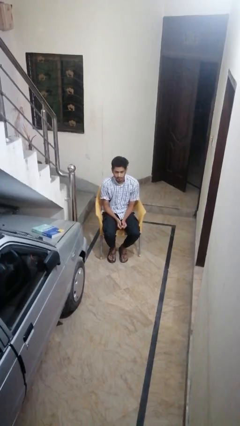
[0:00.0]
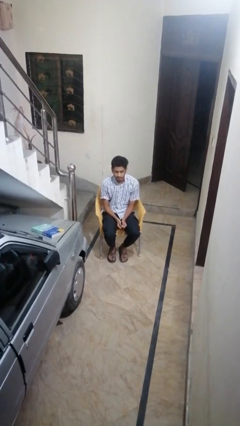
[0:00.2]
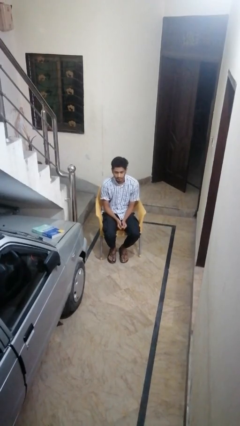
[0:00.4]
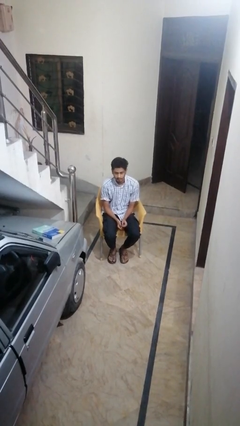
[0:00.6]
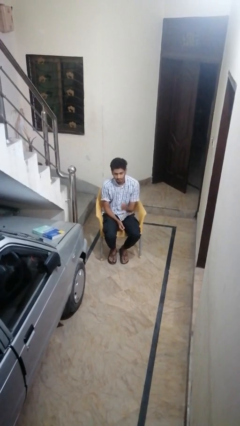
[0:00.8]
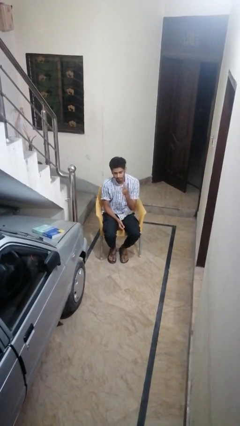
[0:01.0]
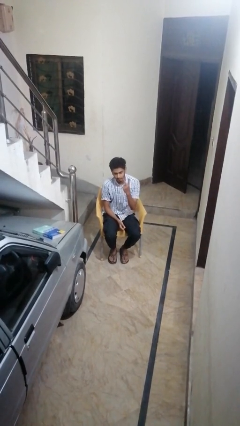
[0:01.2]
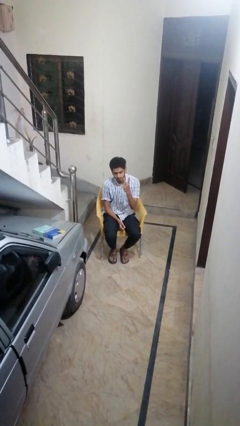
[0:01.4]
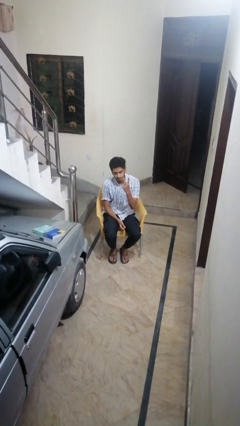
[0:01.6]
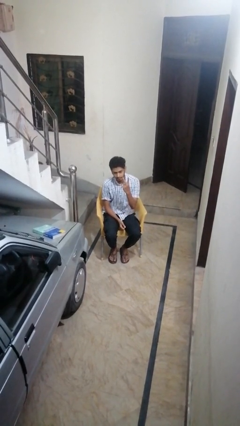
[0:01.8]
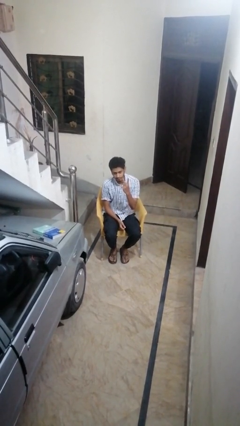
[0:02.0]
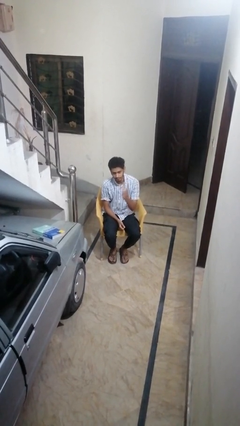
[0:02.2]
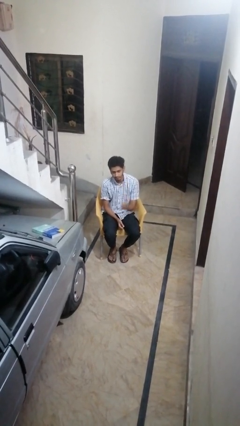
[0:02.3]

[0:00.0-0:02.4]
person gestures peace

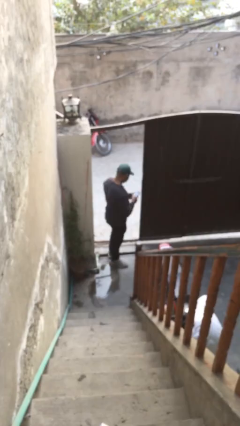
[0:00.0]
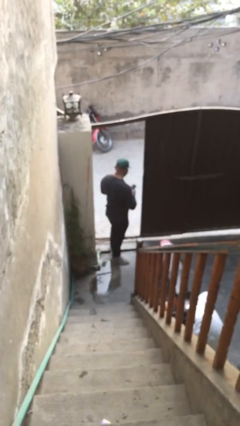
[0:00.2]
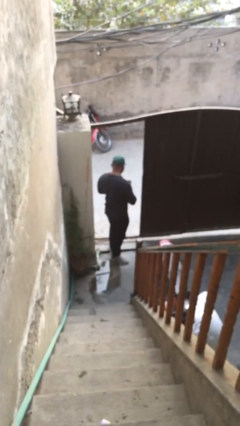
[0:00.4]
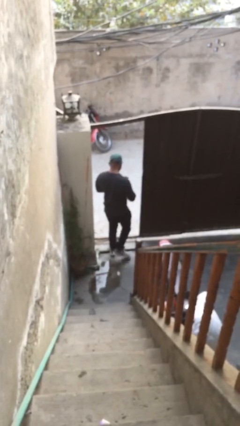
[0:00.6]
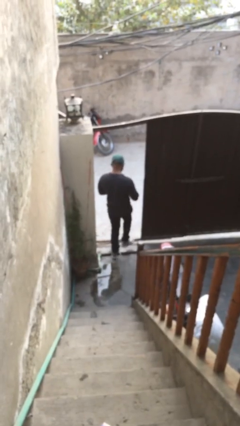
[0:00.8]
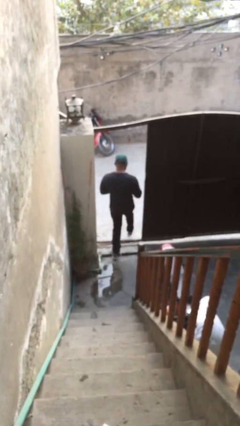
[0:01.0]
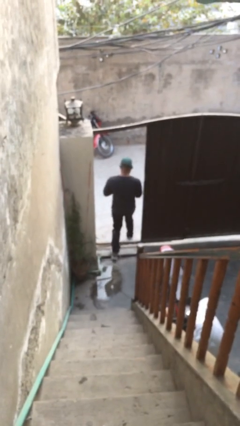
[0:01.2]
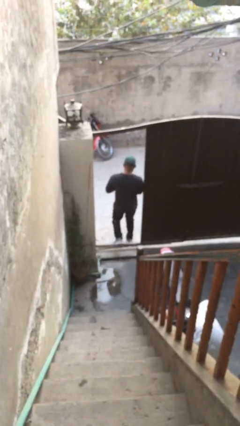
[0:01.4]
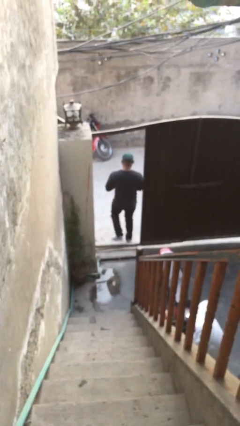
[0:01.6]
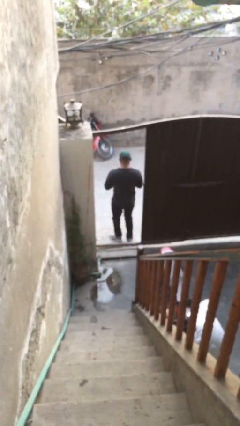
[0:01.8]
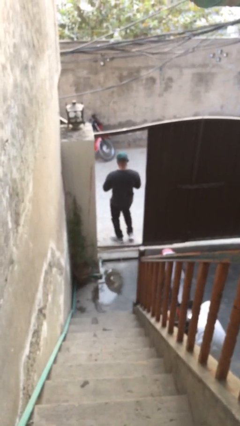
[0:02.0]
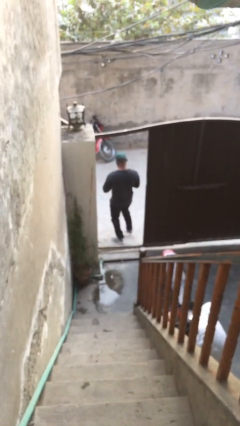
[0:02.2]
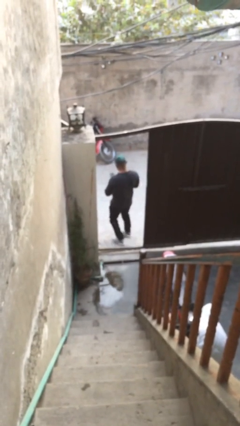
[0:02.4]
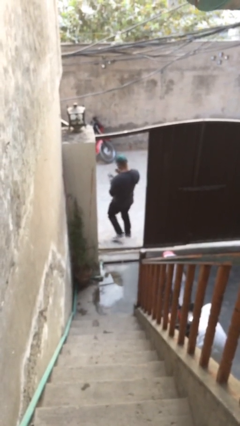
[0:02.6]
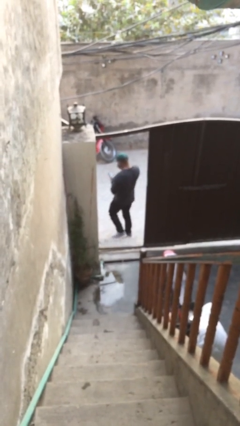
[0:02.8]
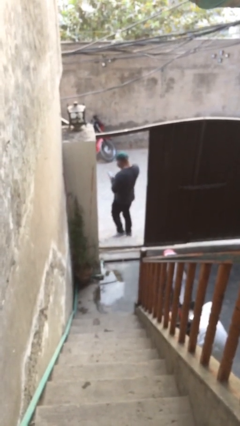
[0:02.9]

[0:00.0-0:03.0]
person exits scene through structure

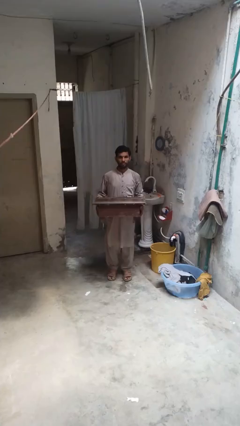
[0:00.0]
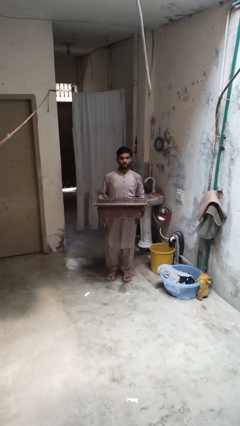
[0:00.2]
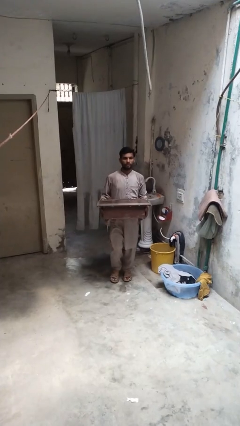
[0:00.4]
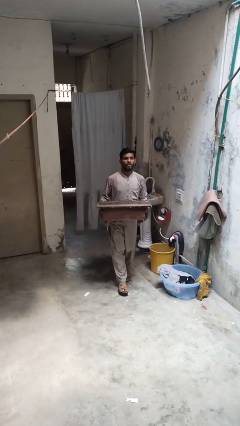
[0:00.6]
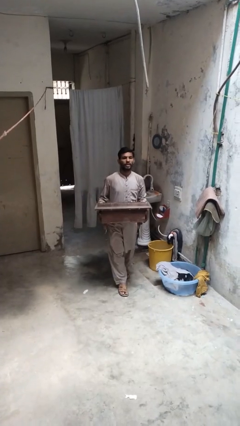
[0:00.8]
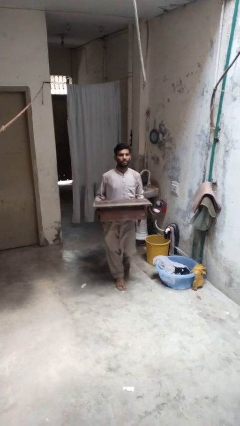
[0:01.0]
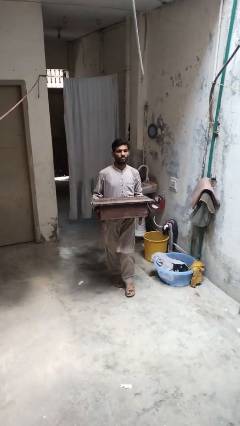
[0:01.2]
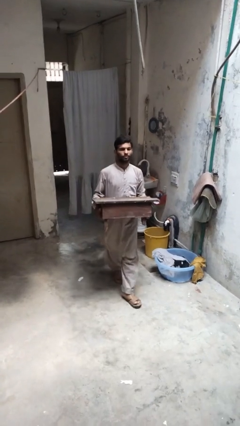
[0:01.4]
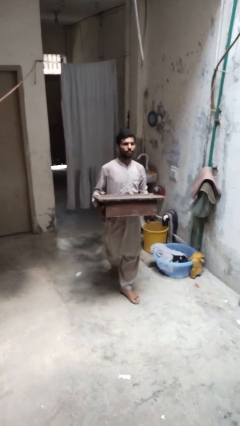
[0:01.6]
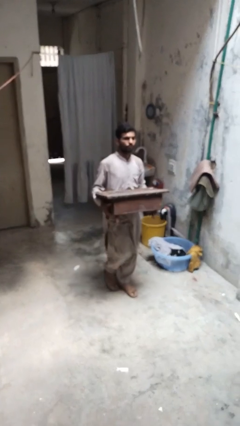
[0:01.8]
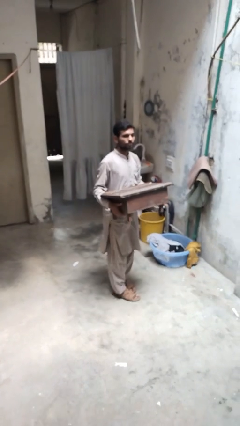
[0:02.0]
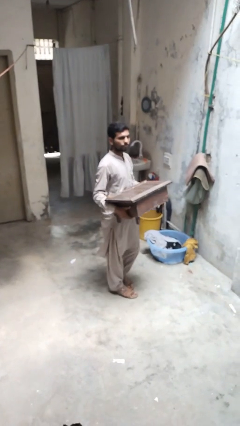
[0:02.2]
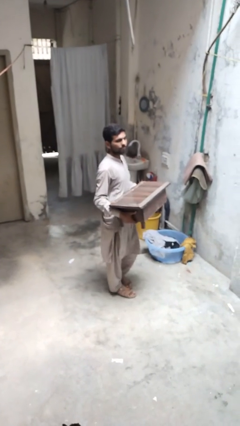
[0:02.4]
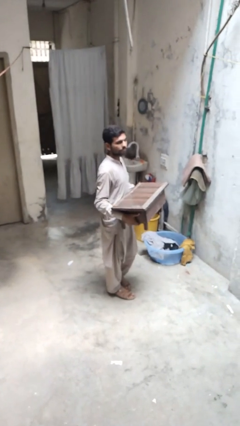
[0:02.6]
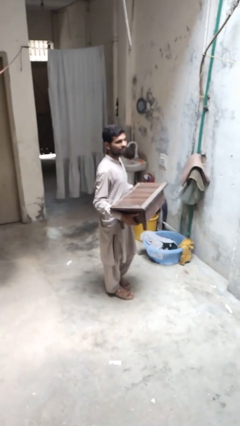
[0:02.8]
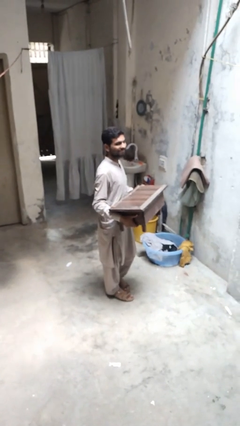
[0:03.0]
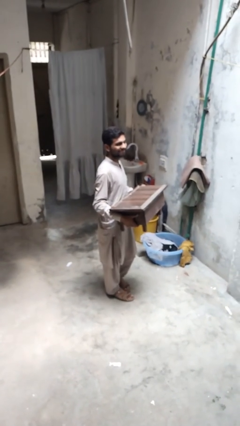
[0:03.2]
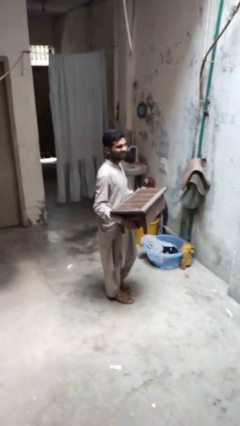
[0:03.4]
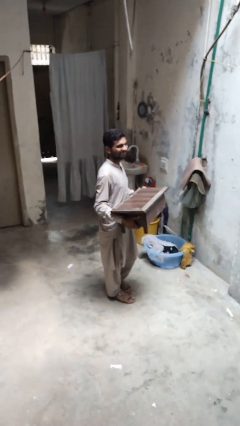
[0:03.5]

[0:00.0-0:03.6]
person carries furniture

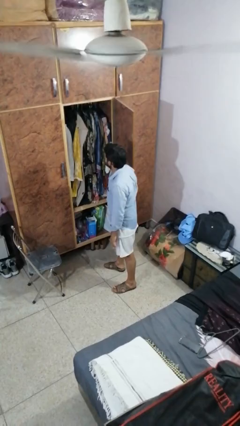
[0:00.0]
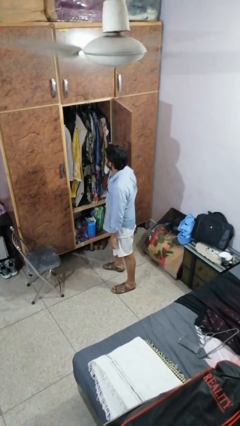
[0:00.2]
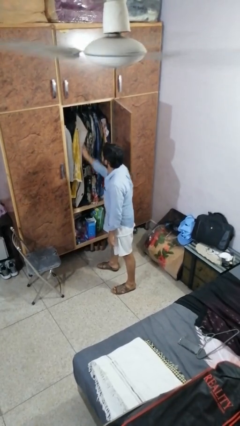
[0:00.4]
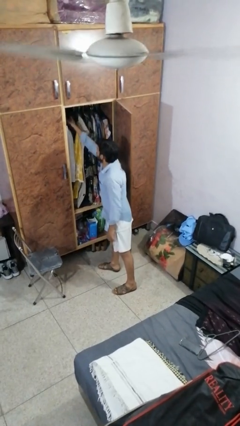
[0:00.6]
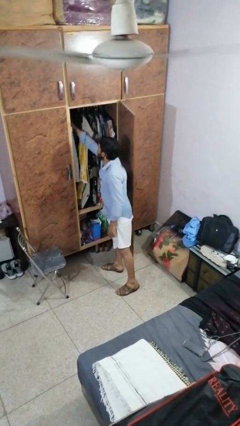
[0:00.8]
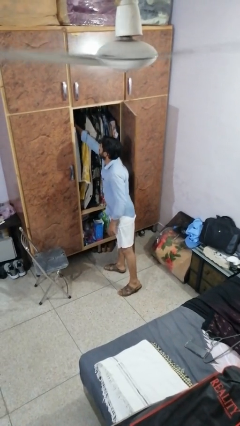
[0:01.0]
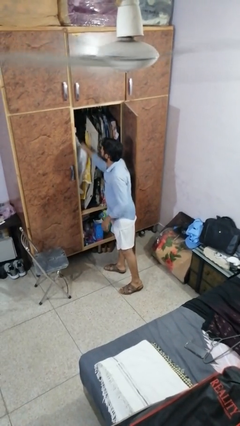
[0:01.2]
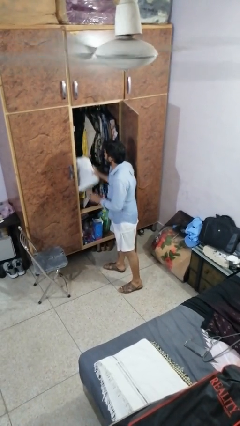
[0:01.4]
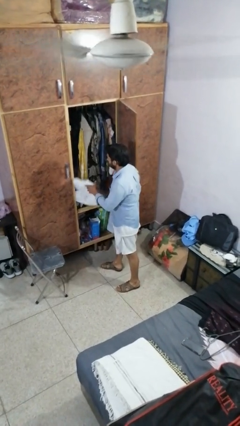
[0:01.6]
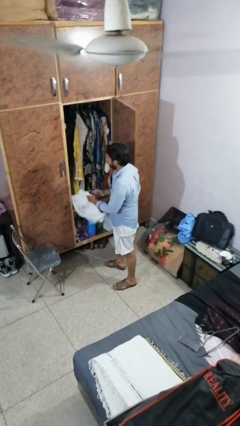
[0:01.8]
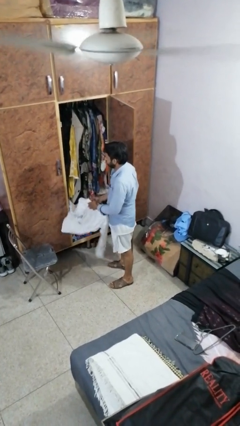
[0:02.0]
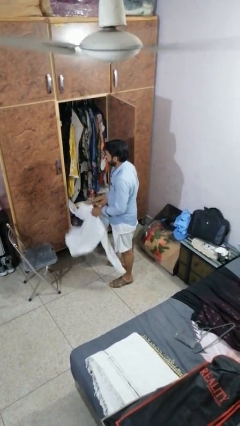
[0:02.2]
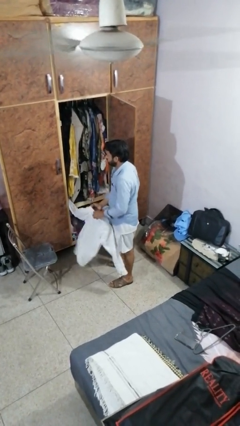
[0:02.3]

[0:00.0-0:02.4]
person takes clothes from closet

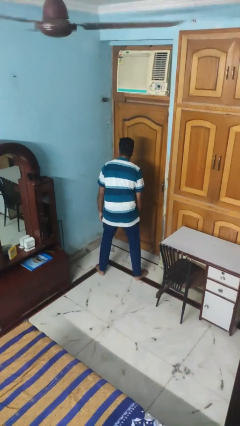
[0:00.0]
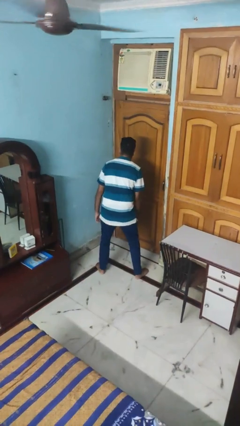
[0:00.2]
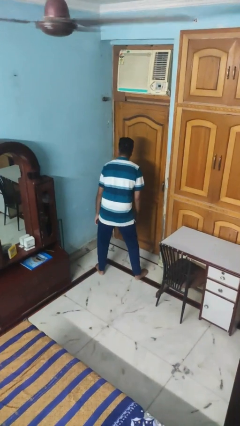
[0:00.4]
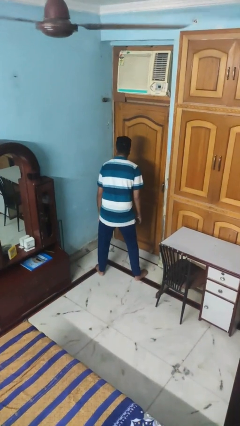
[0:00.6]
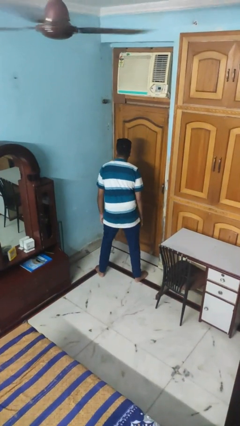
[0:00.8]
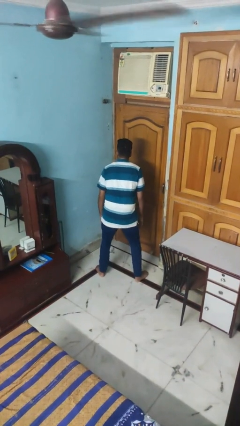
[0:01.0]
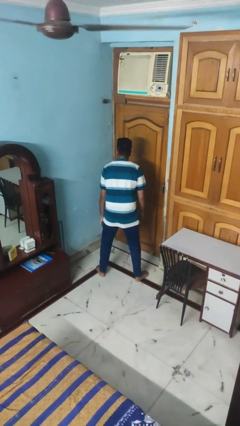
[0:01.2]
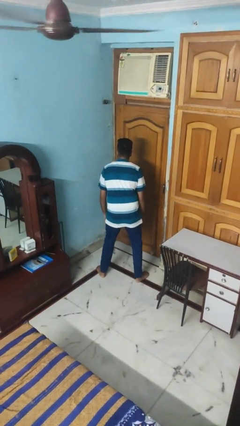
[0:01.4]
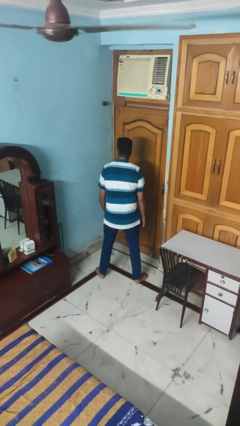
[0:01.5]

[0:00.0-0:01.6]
person wiggles hips

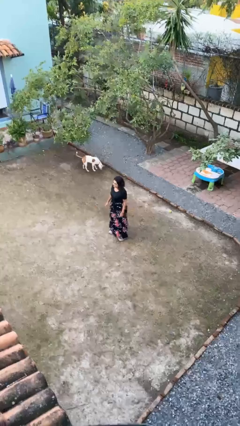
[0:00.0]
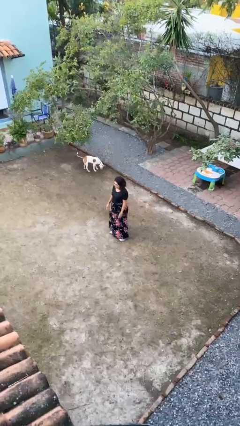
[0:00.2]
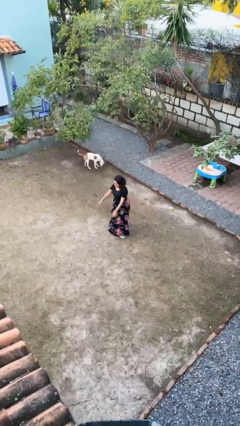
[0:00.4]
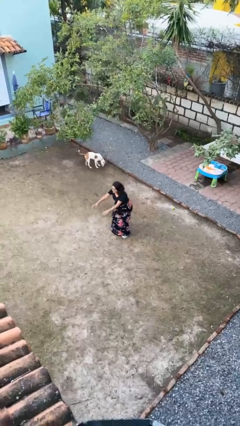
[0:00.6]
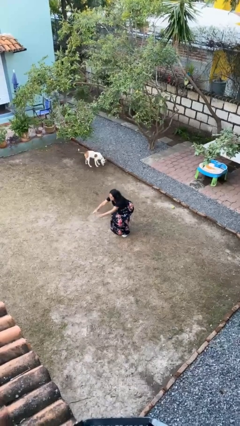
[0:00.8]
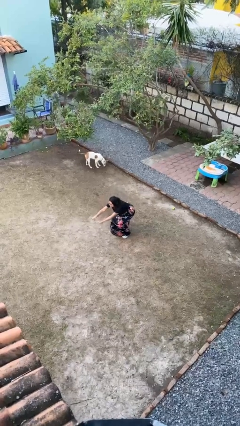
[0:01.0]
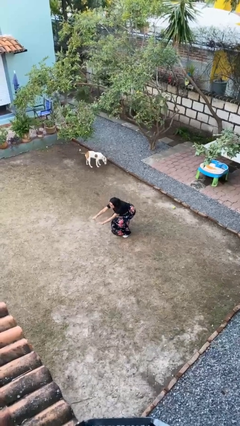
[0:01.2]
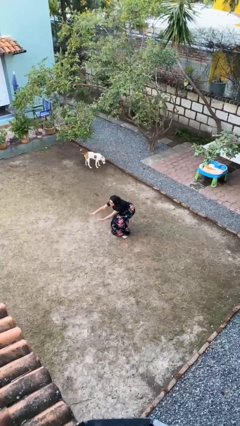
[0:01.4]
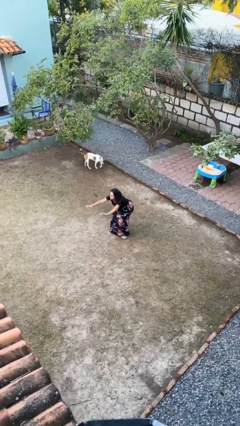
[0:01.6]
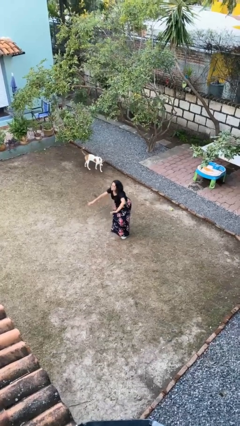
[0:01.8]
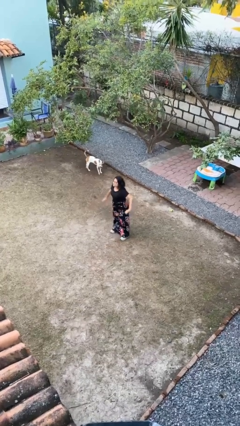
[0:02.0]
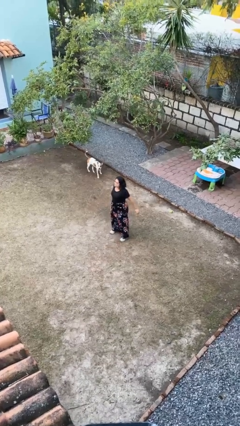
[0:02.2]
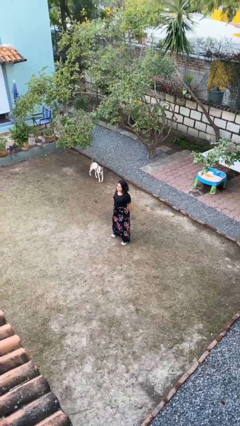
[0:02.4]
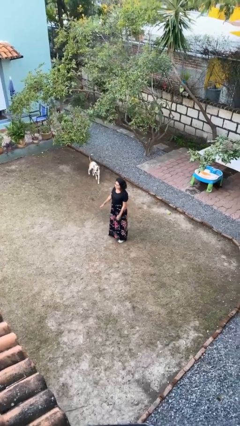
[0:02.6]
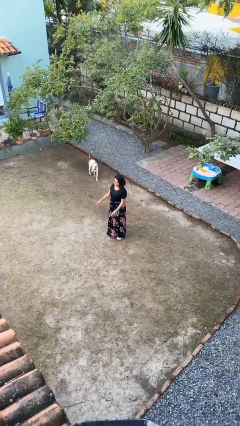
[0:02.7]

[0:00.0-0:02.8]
person exercises with situp

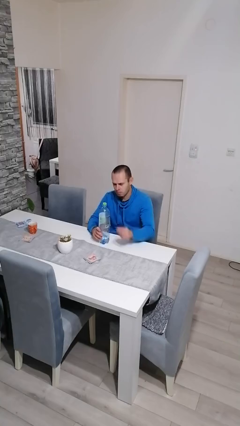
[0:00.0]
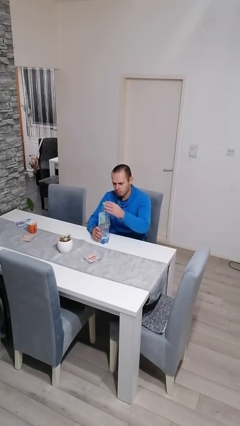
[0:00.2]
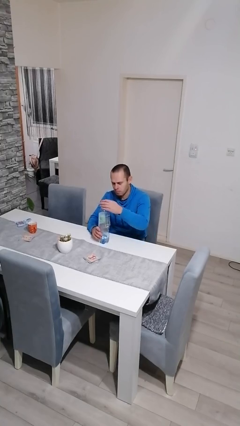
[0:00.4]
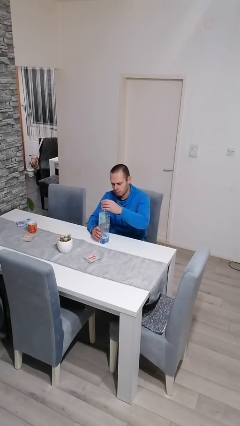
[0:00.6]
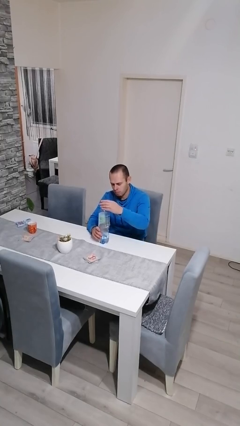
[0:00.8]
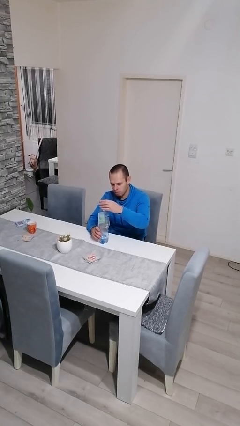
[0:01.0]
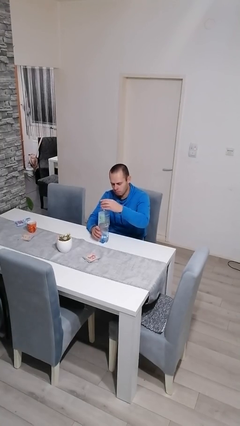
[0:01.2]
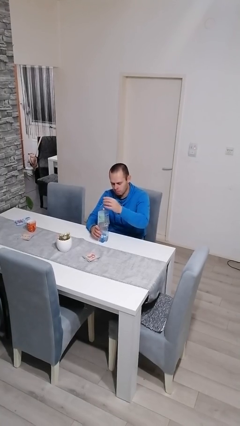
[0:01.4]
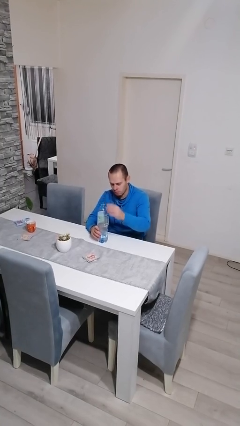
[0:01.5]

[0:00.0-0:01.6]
person unscrews lid from bottle

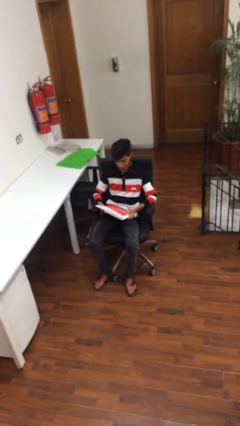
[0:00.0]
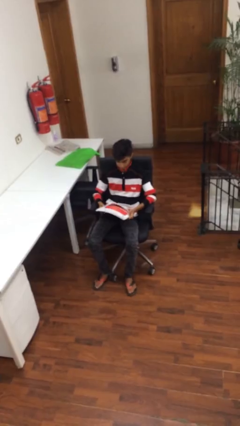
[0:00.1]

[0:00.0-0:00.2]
person reads document
